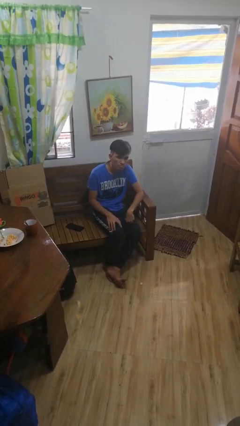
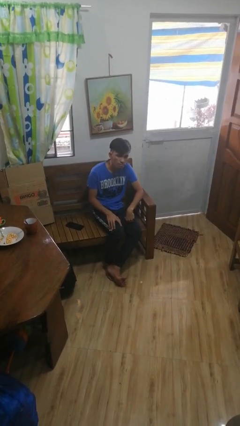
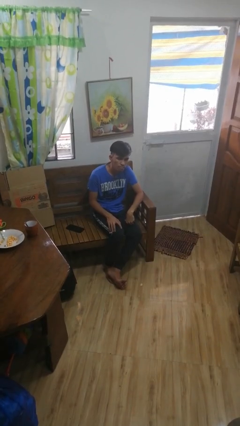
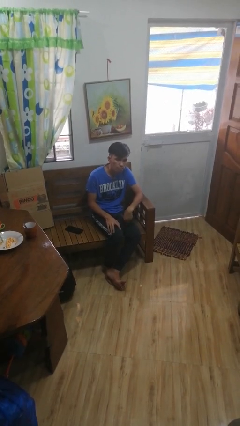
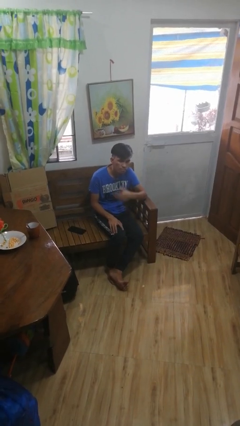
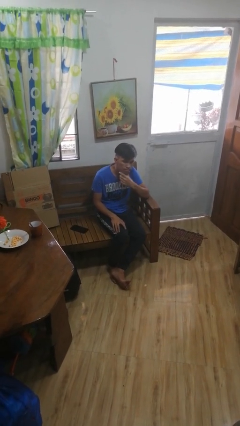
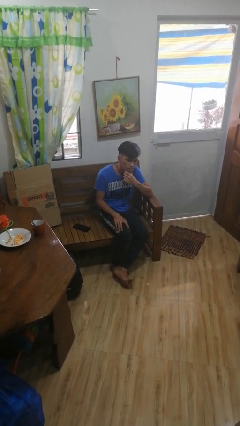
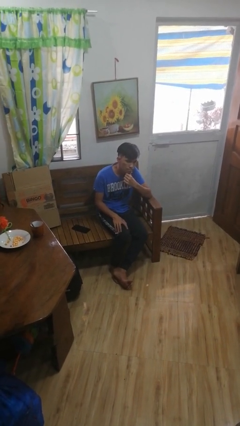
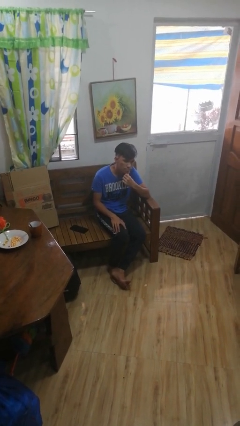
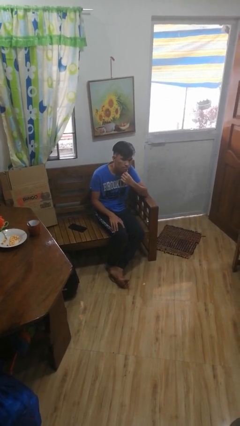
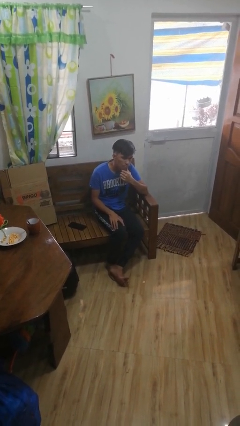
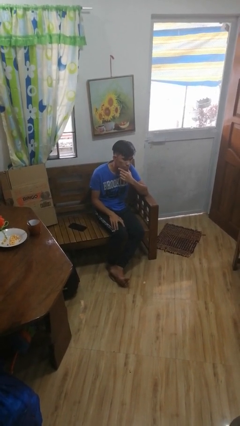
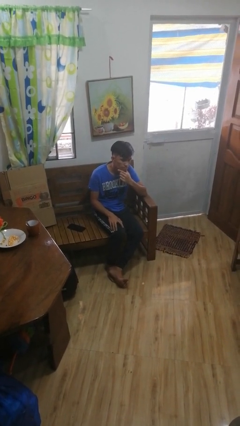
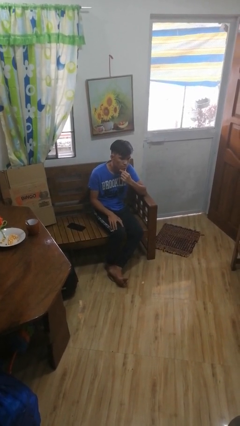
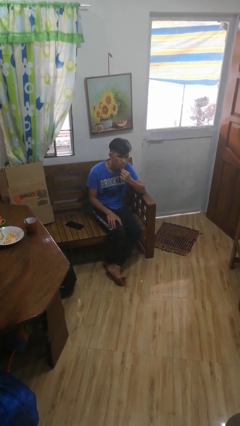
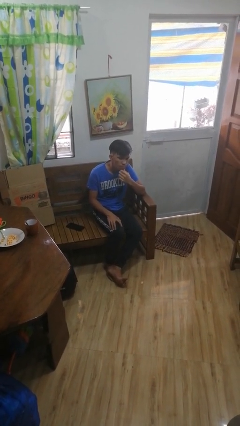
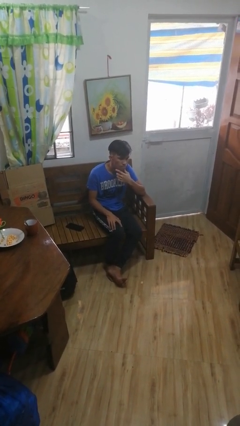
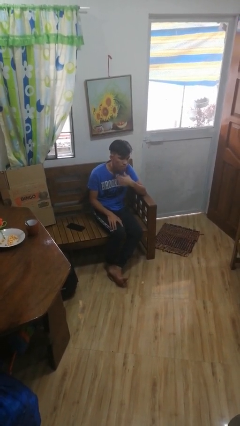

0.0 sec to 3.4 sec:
person strokes chin

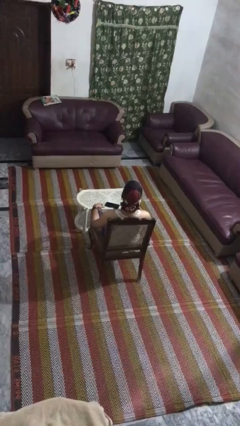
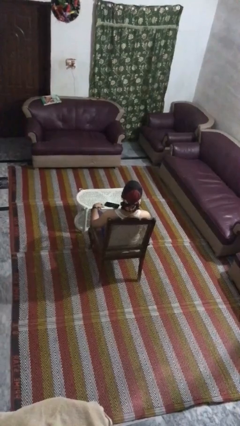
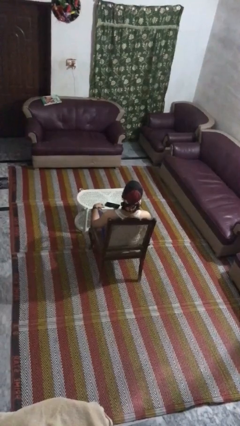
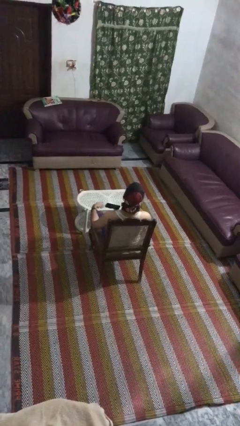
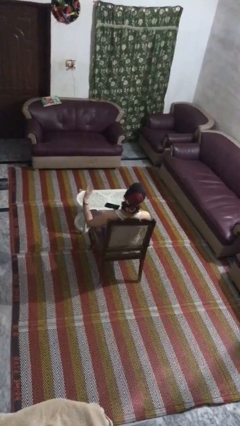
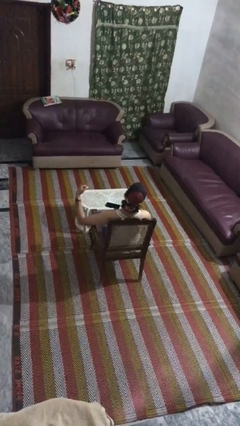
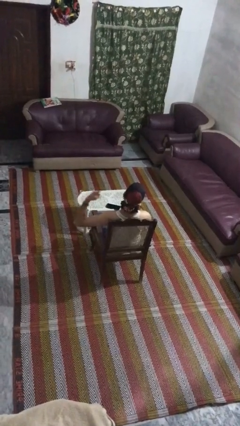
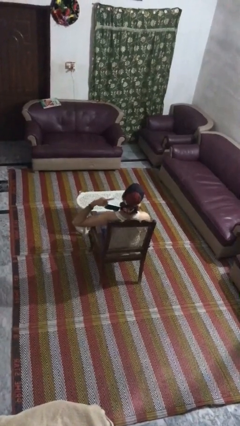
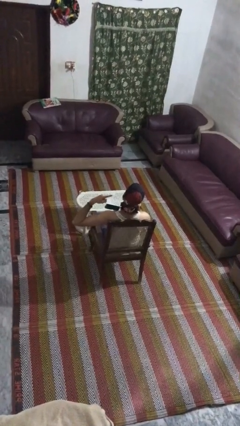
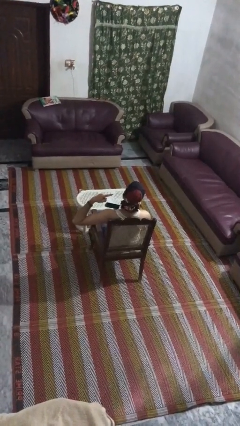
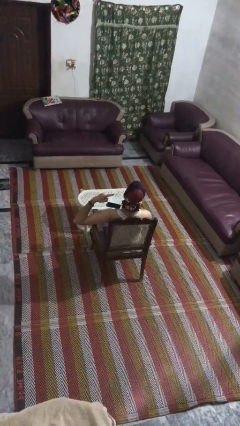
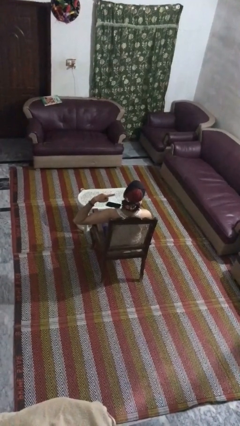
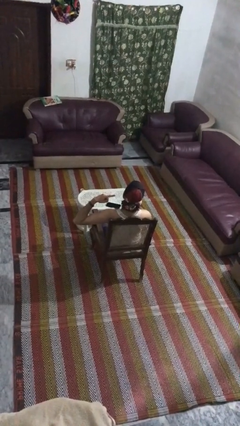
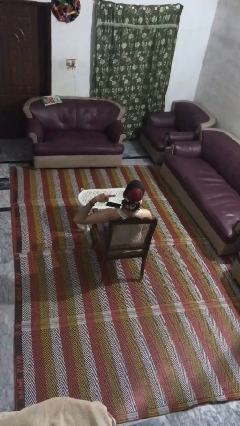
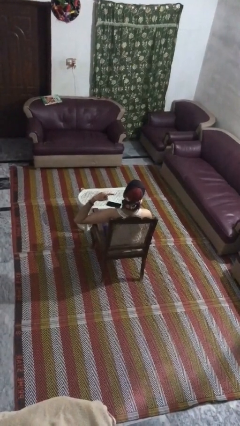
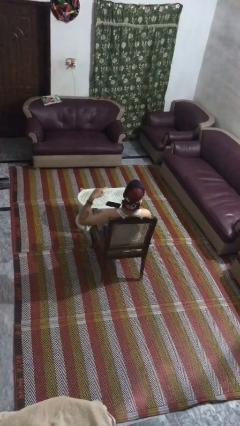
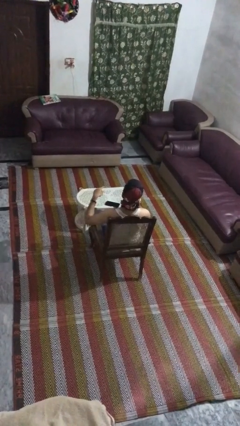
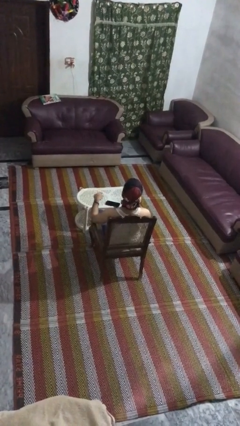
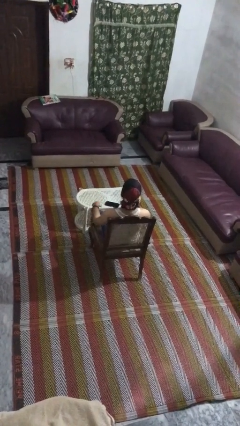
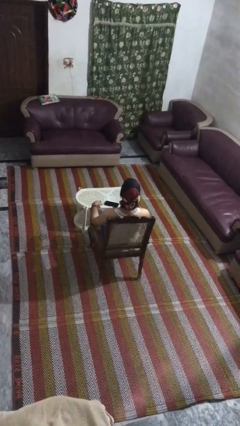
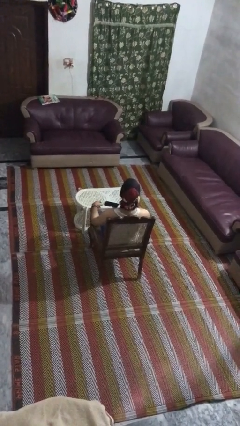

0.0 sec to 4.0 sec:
person gestures listen closely

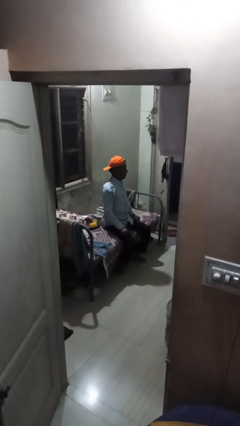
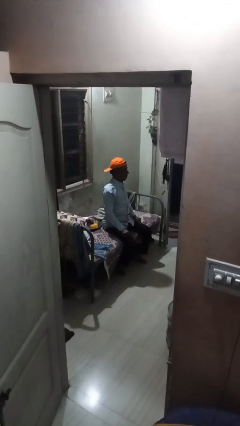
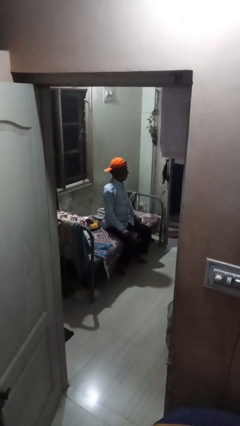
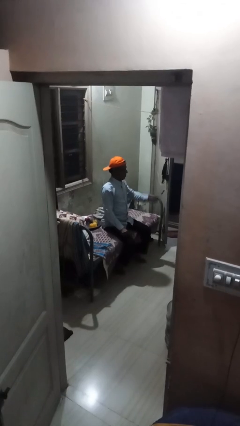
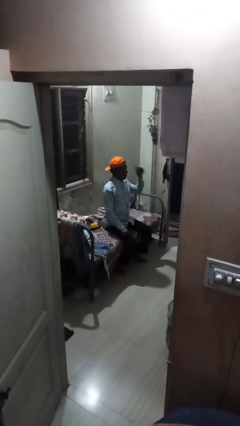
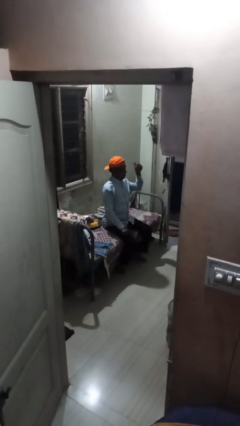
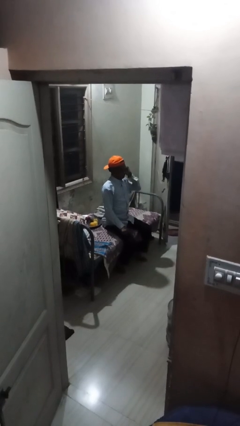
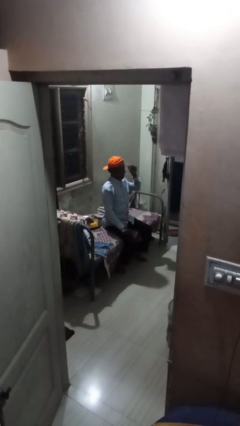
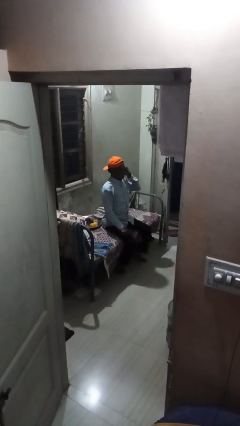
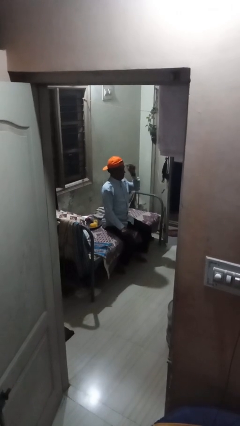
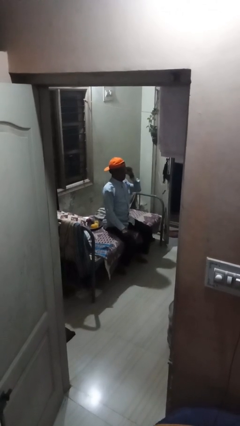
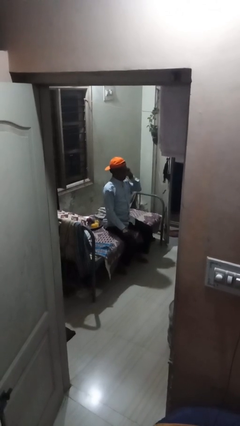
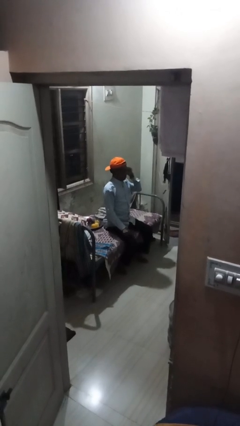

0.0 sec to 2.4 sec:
person gestures behind me

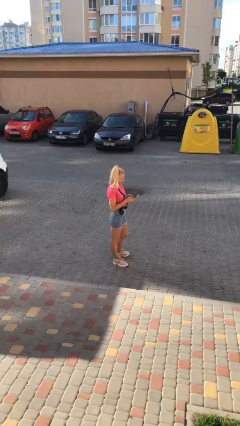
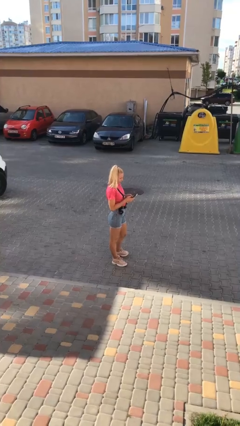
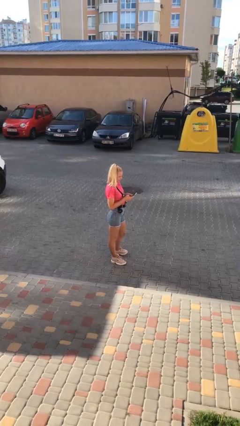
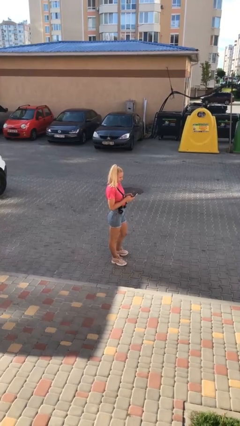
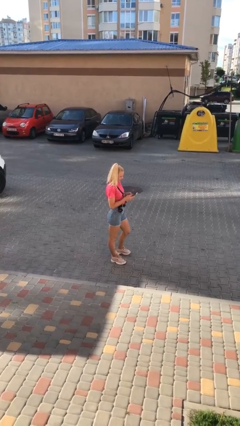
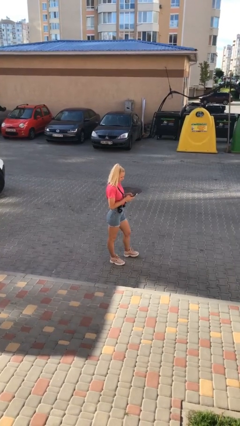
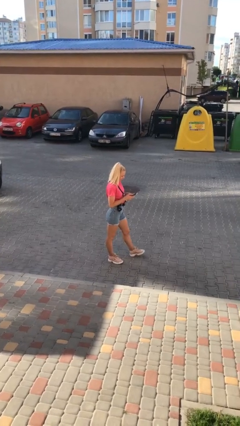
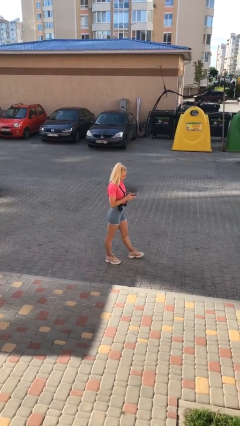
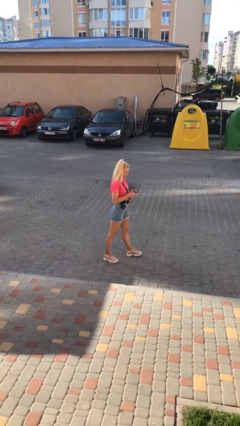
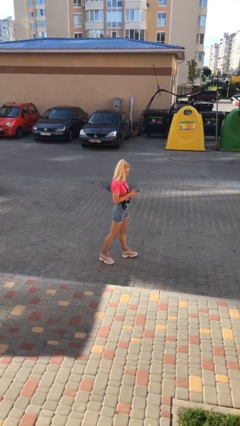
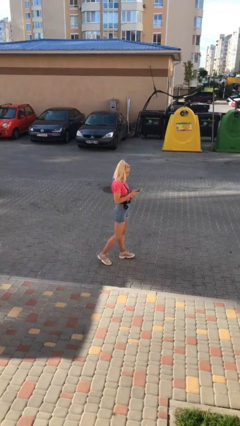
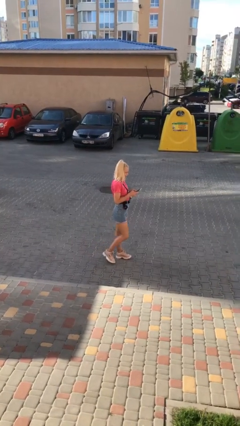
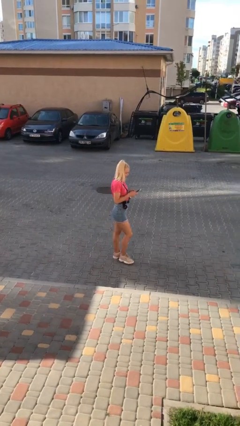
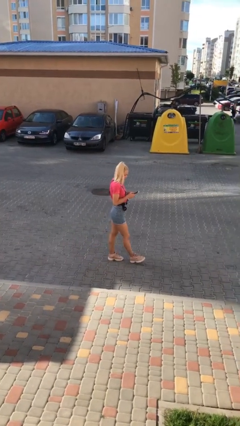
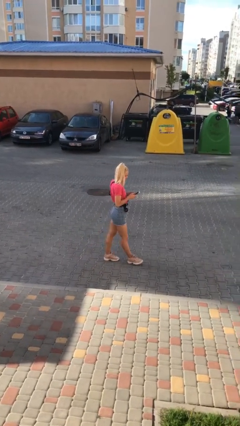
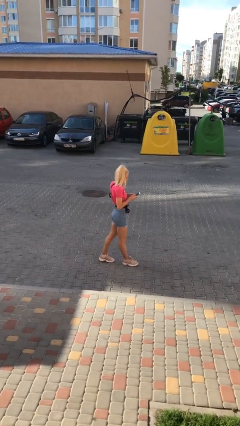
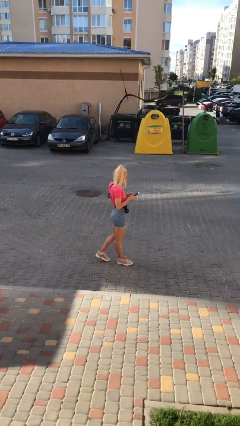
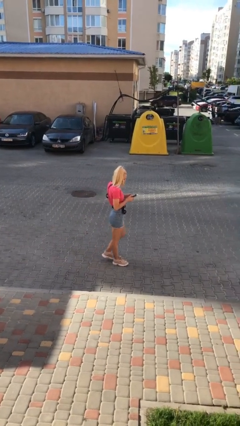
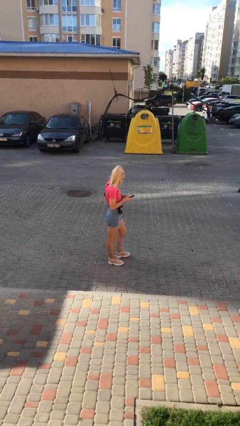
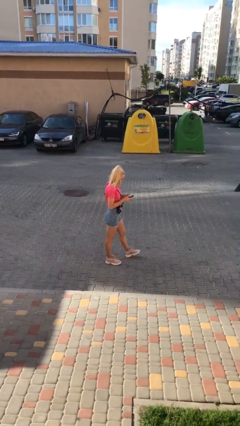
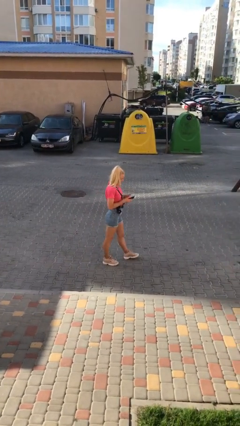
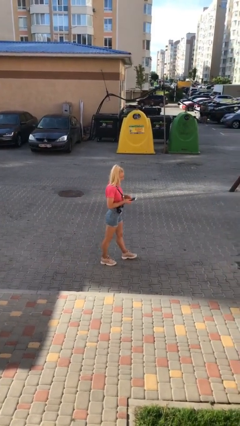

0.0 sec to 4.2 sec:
person texts on phone

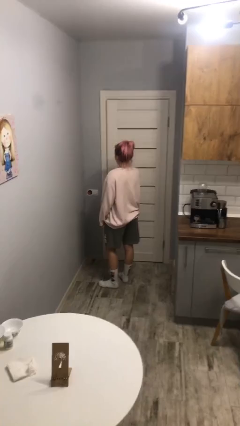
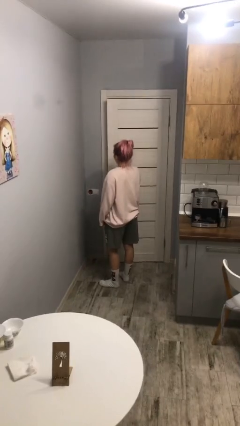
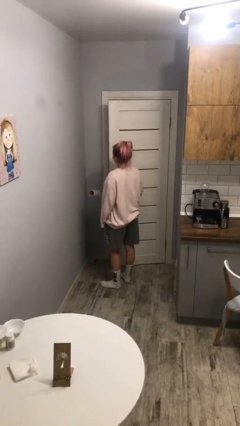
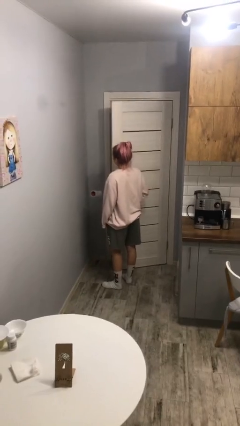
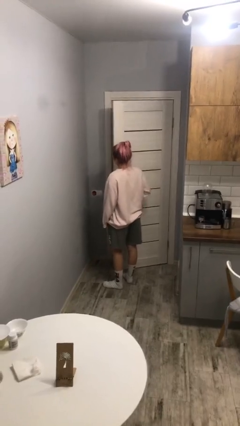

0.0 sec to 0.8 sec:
person opens facility door

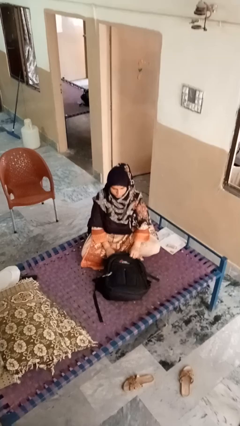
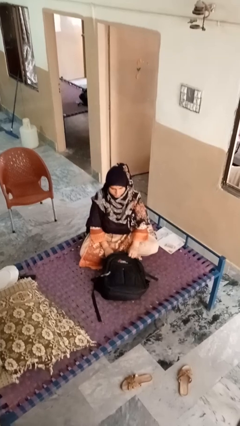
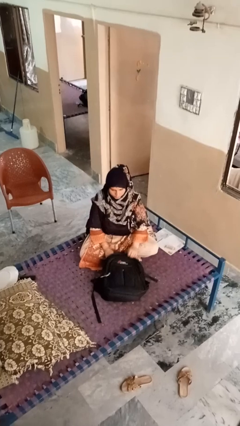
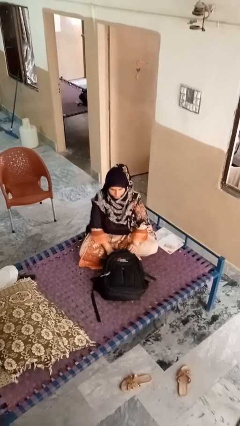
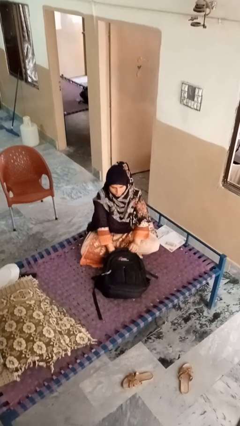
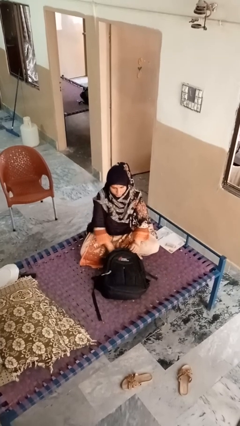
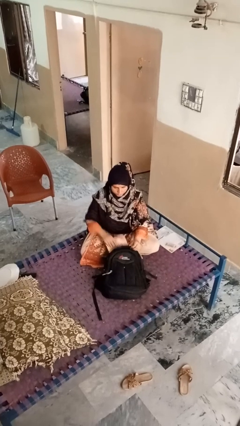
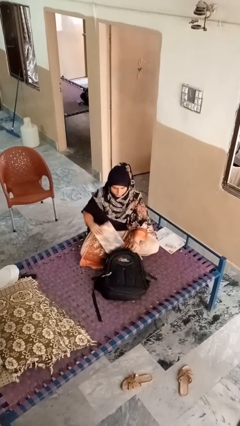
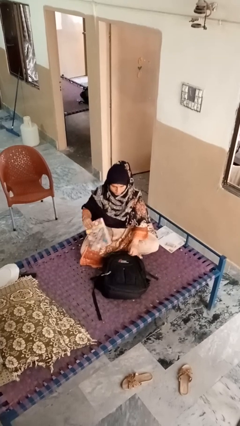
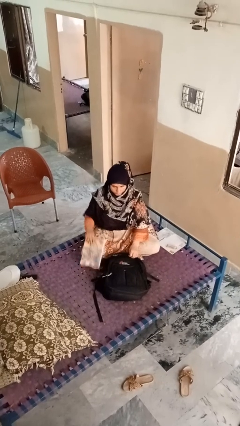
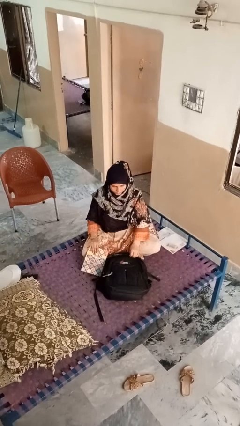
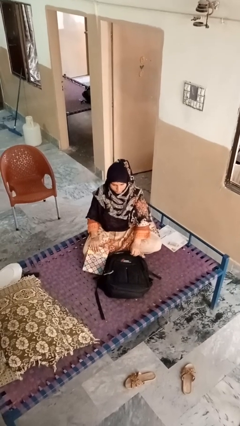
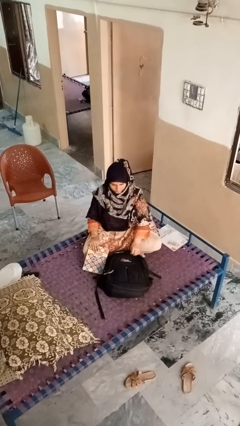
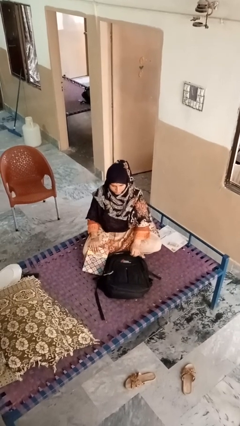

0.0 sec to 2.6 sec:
person takes object from bag
